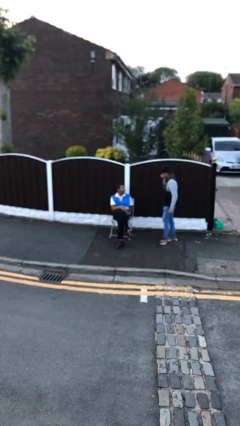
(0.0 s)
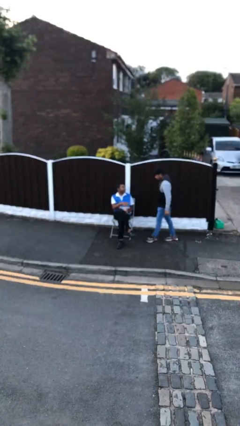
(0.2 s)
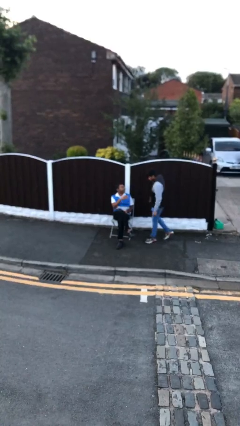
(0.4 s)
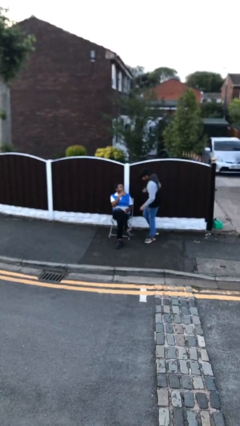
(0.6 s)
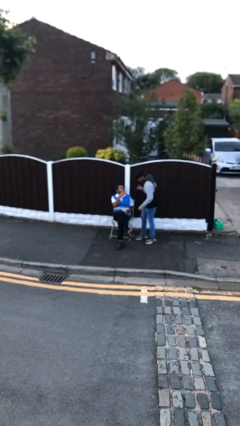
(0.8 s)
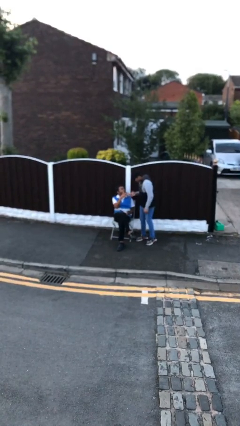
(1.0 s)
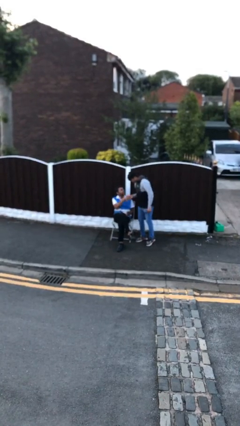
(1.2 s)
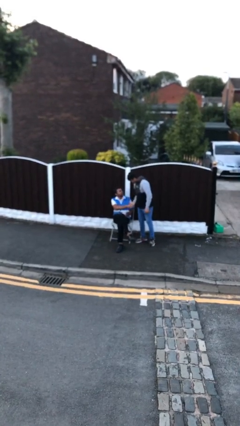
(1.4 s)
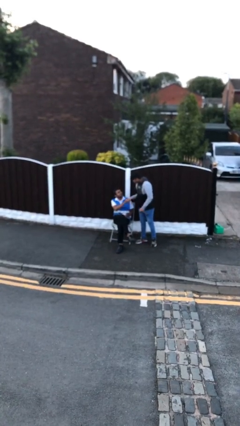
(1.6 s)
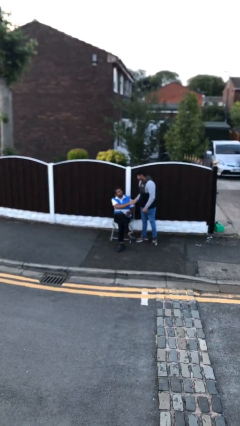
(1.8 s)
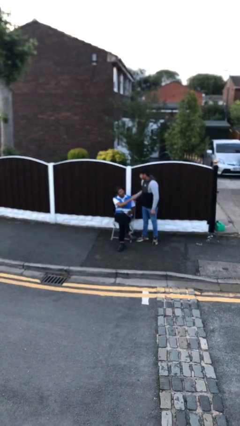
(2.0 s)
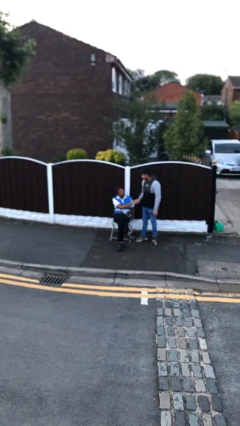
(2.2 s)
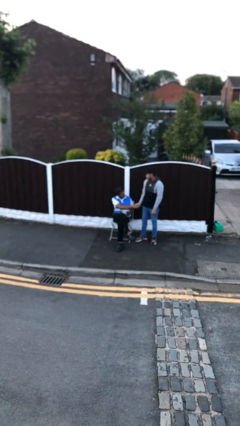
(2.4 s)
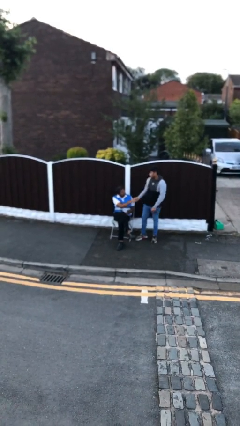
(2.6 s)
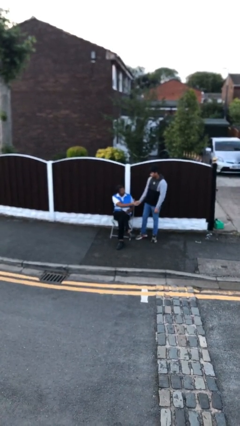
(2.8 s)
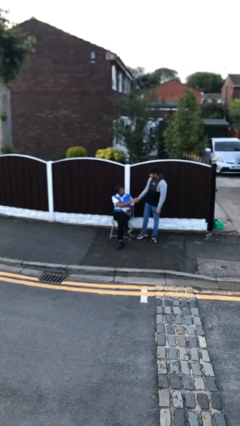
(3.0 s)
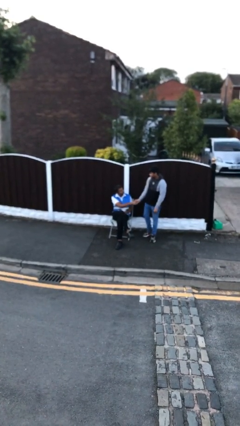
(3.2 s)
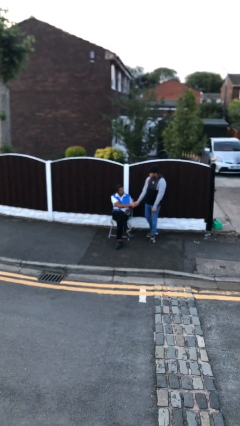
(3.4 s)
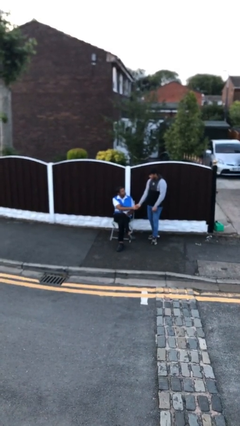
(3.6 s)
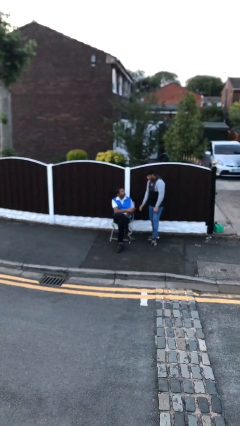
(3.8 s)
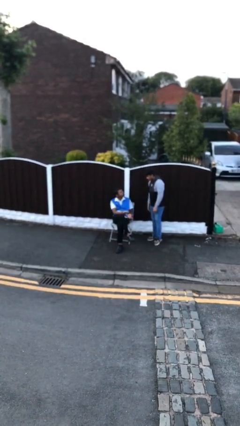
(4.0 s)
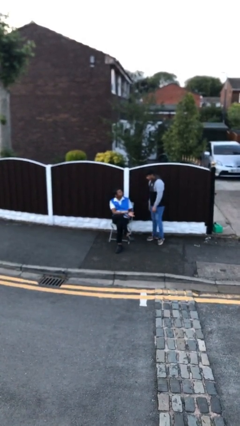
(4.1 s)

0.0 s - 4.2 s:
person shakes hand

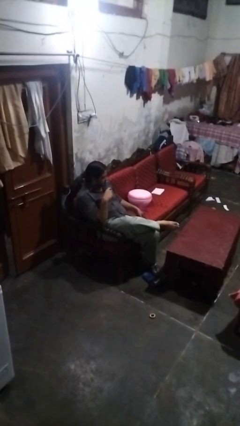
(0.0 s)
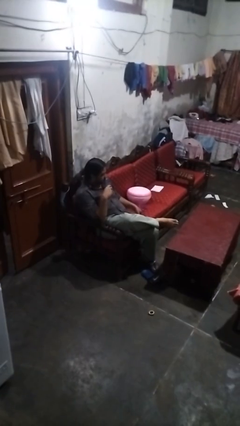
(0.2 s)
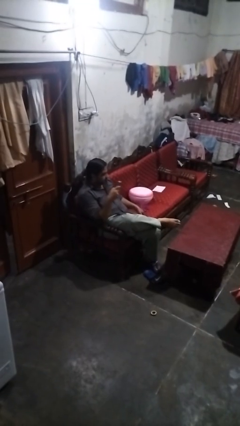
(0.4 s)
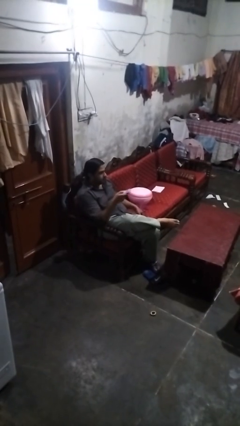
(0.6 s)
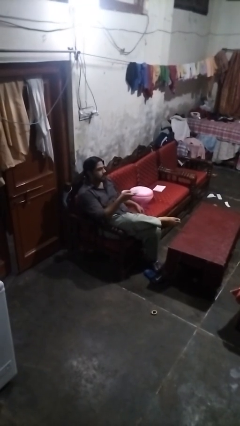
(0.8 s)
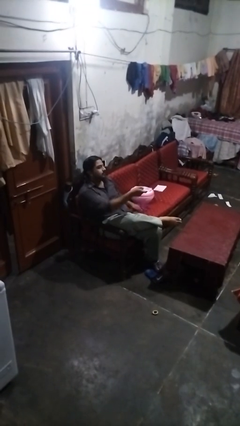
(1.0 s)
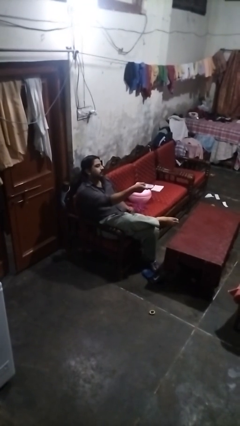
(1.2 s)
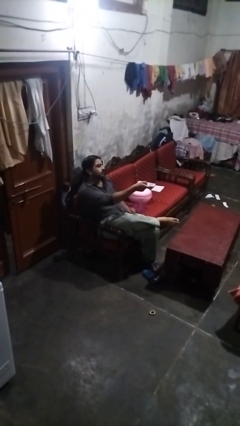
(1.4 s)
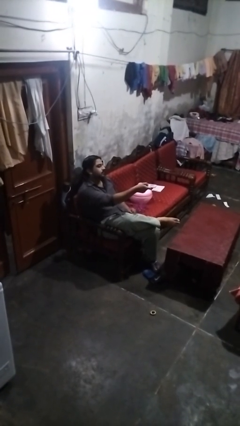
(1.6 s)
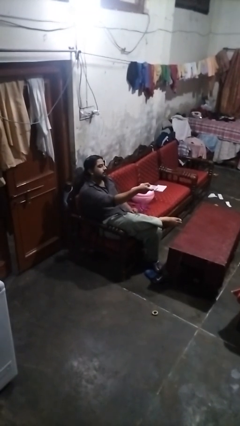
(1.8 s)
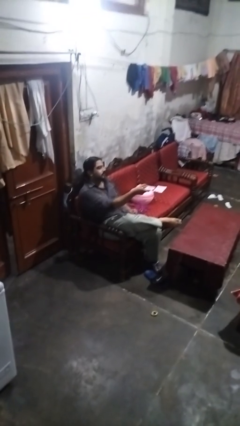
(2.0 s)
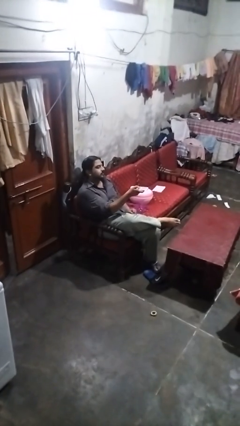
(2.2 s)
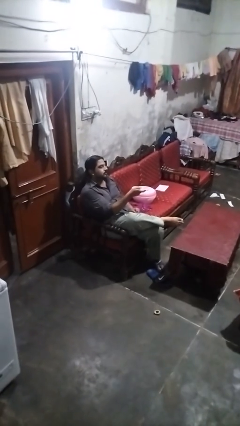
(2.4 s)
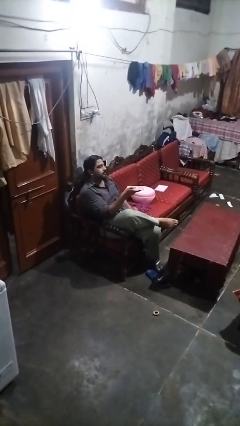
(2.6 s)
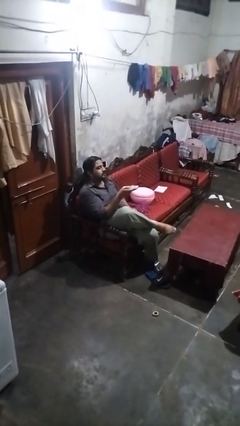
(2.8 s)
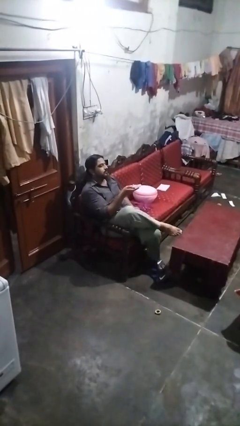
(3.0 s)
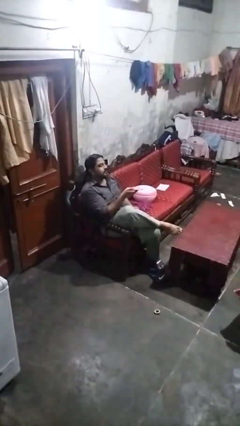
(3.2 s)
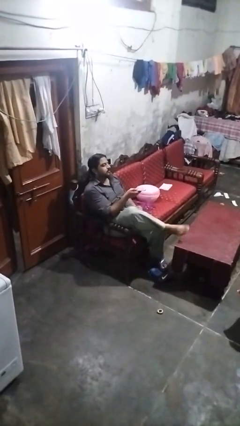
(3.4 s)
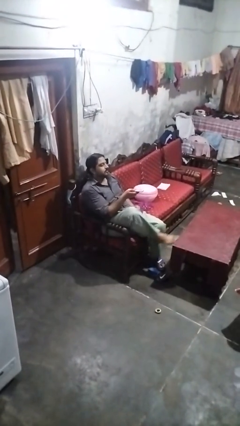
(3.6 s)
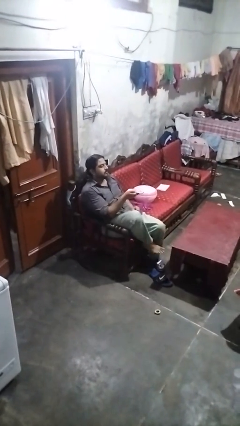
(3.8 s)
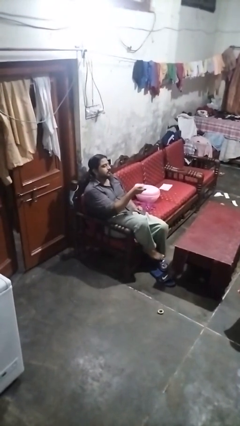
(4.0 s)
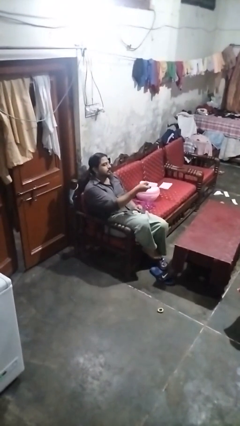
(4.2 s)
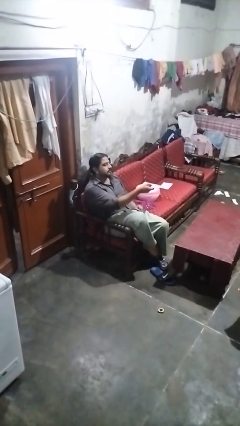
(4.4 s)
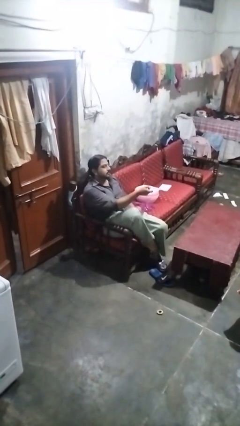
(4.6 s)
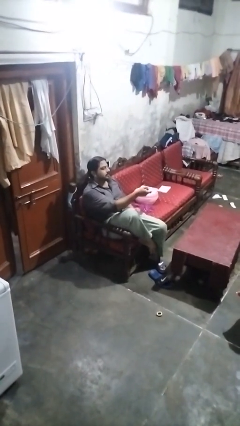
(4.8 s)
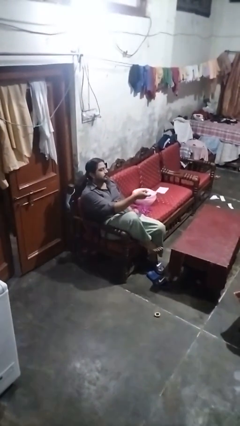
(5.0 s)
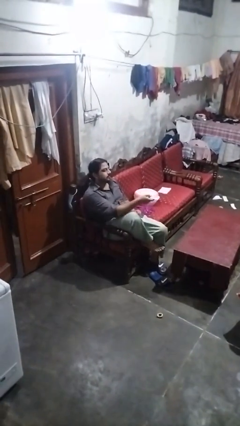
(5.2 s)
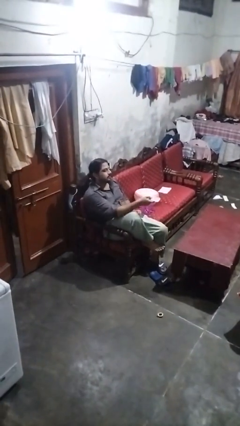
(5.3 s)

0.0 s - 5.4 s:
person uses television remote

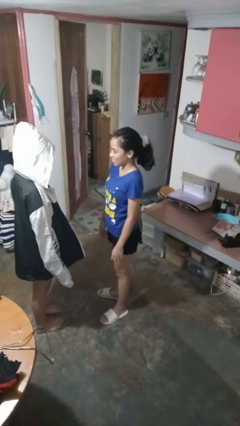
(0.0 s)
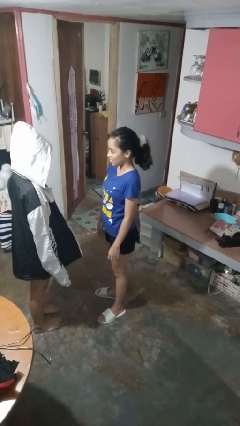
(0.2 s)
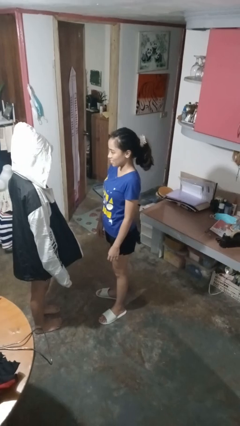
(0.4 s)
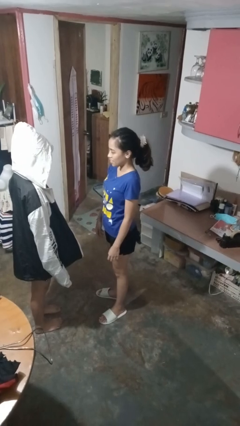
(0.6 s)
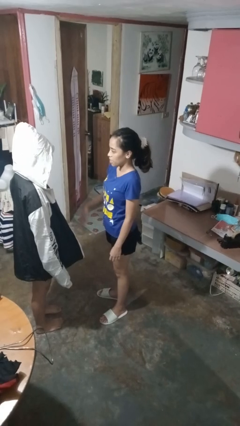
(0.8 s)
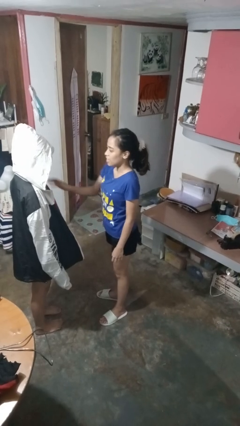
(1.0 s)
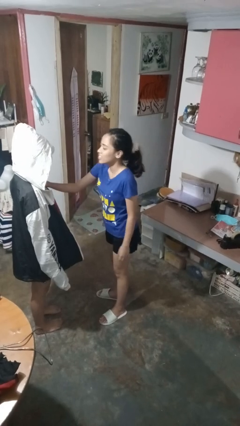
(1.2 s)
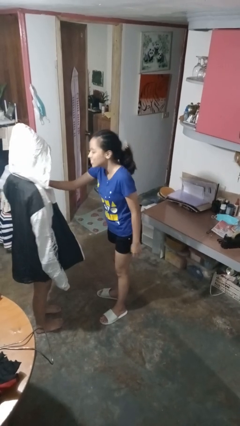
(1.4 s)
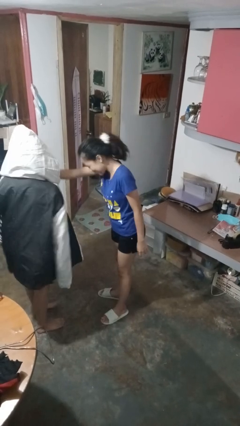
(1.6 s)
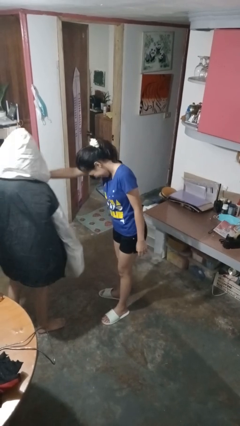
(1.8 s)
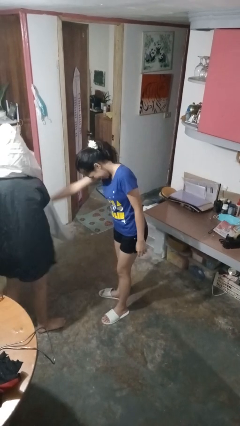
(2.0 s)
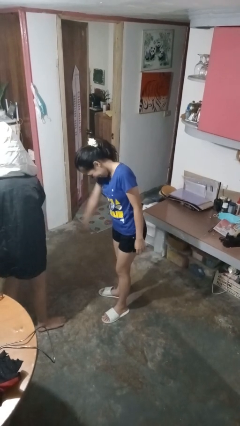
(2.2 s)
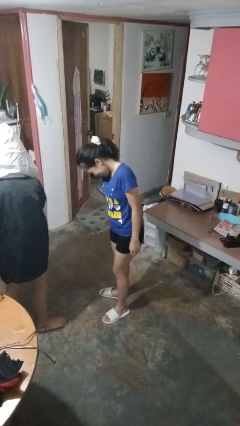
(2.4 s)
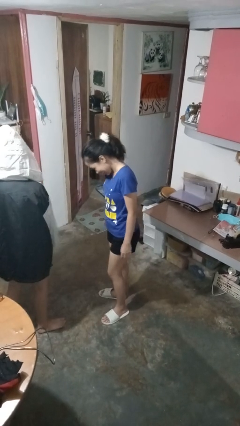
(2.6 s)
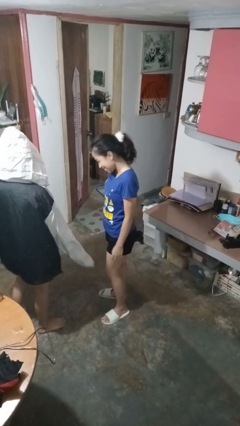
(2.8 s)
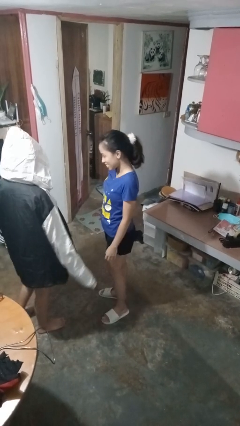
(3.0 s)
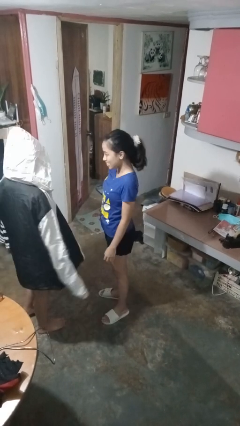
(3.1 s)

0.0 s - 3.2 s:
person shoves person

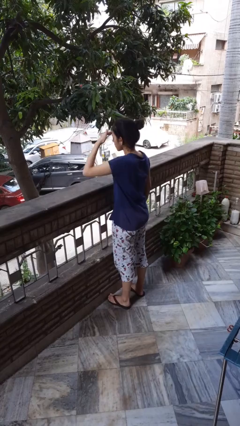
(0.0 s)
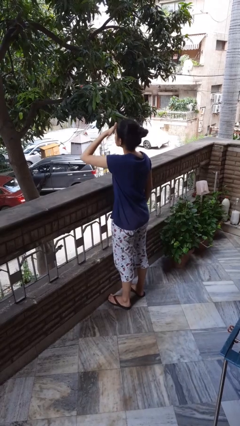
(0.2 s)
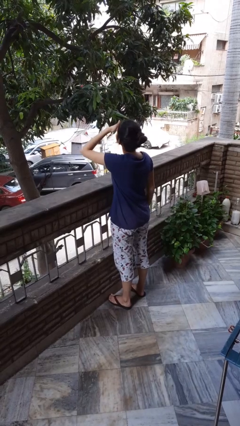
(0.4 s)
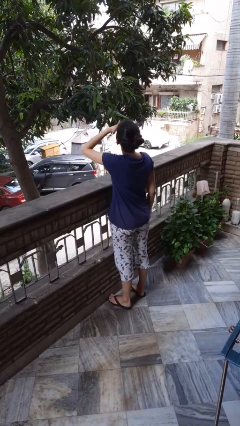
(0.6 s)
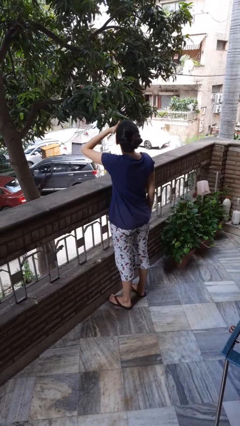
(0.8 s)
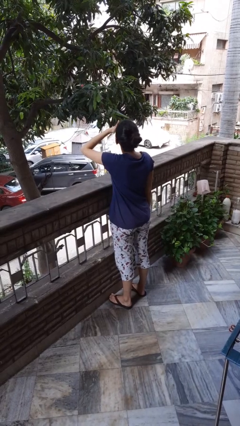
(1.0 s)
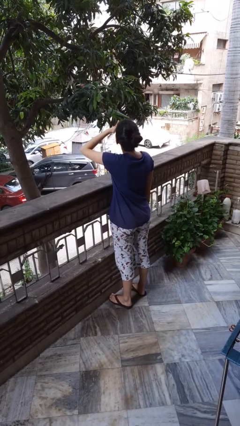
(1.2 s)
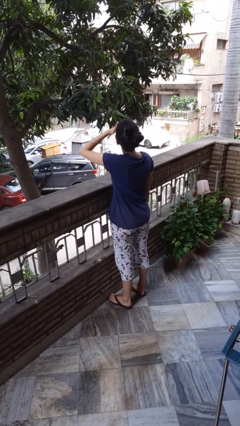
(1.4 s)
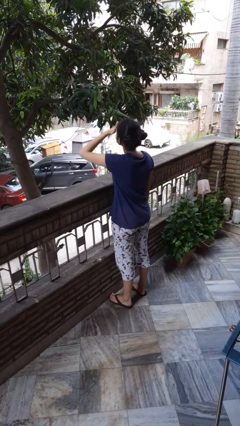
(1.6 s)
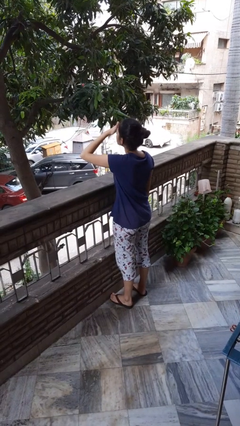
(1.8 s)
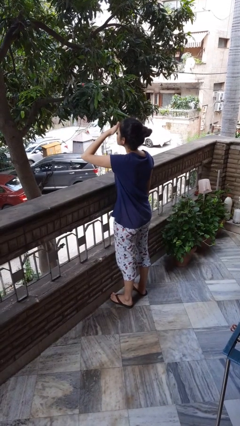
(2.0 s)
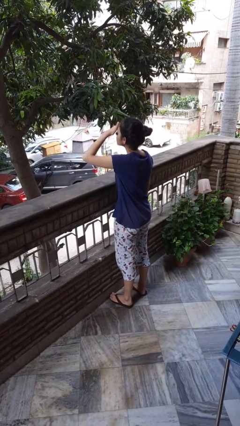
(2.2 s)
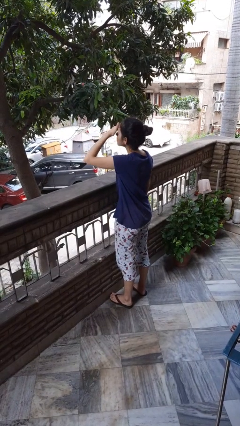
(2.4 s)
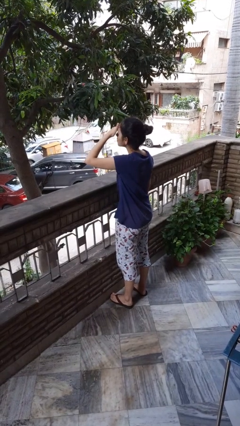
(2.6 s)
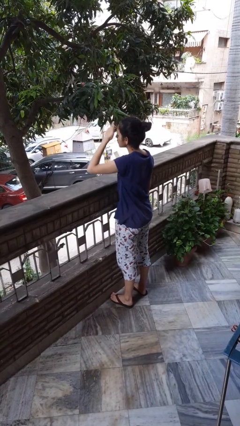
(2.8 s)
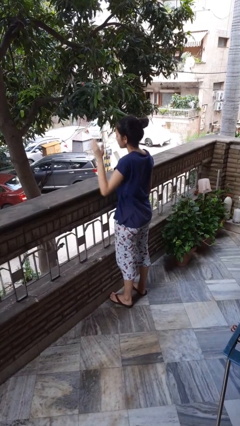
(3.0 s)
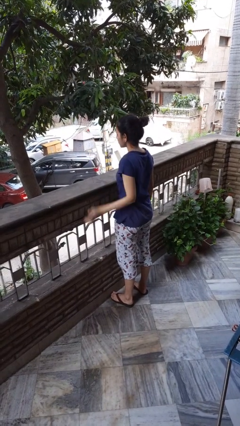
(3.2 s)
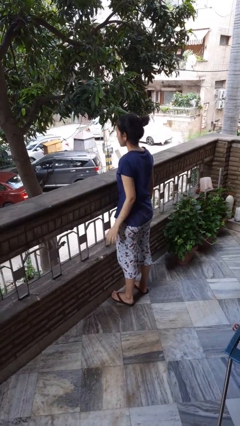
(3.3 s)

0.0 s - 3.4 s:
person shades eyes

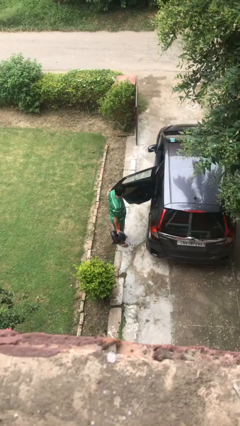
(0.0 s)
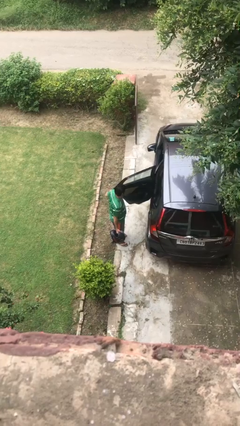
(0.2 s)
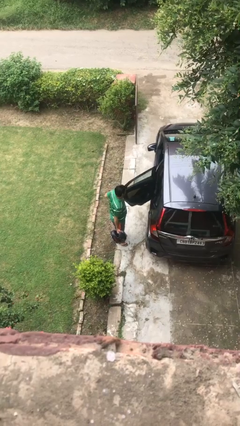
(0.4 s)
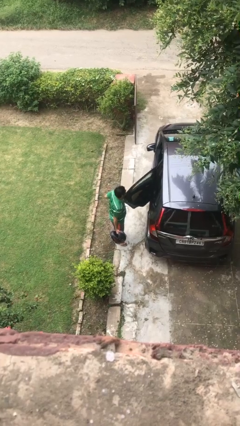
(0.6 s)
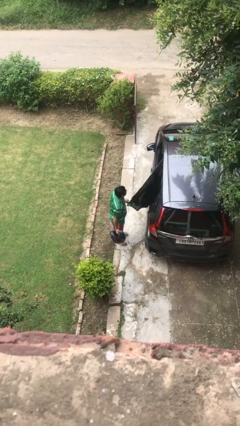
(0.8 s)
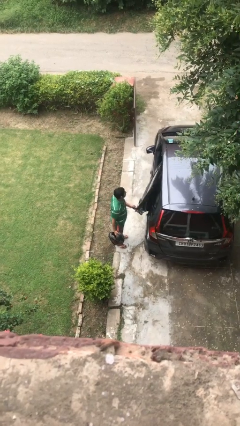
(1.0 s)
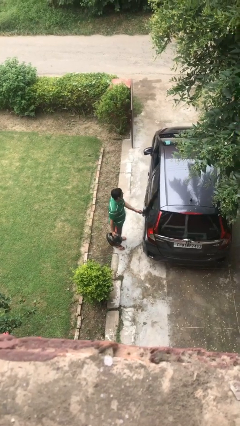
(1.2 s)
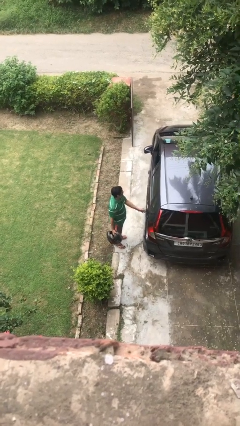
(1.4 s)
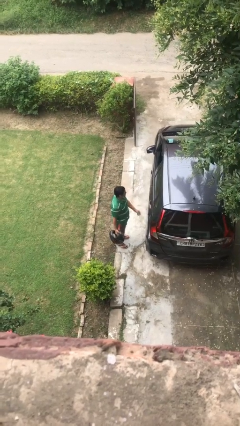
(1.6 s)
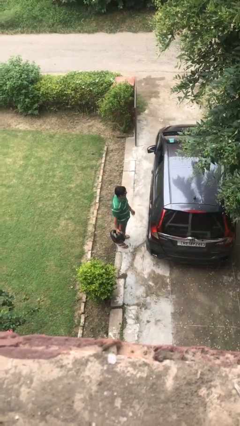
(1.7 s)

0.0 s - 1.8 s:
person closes car door
